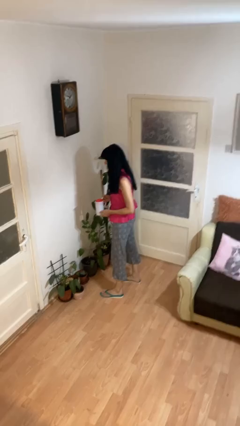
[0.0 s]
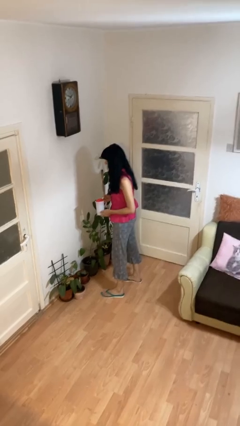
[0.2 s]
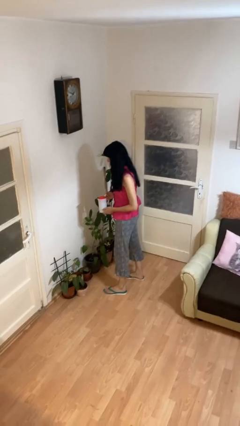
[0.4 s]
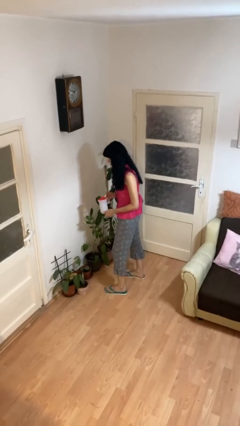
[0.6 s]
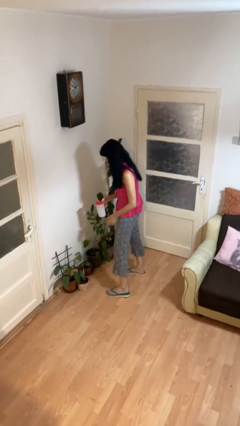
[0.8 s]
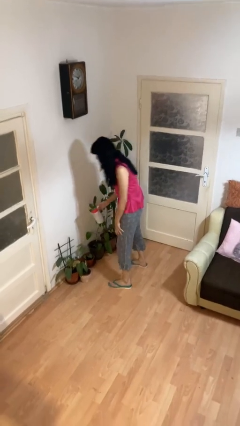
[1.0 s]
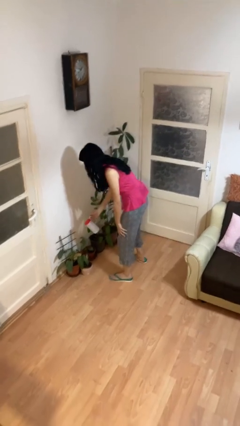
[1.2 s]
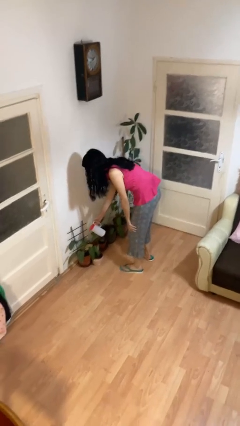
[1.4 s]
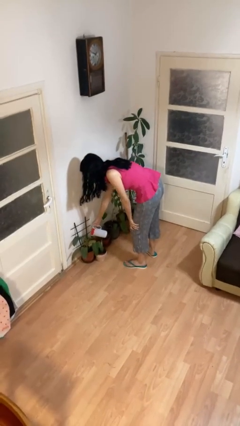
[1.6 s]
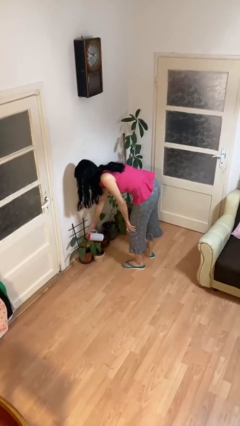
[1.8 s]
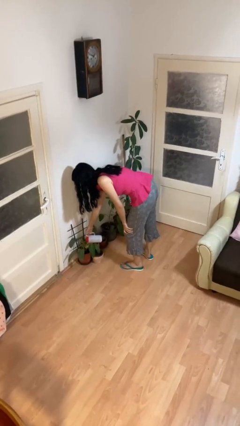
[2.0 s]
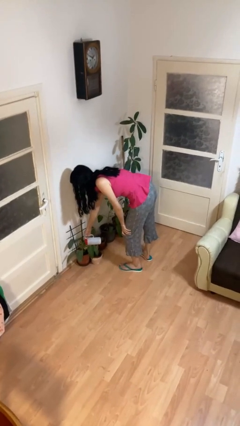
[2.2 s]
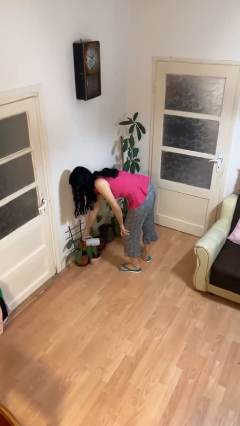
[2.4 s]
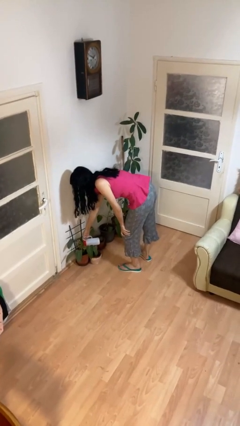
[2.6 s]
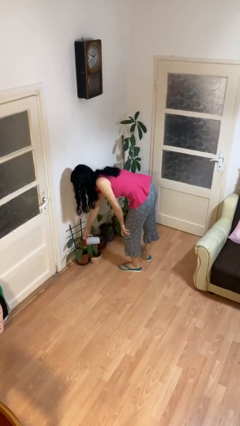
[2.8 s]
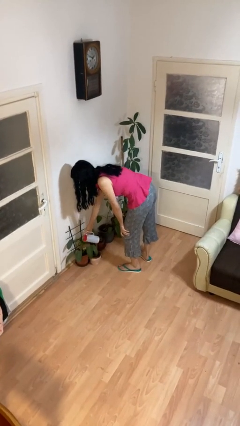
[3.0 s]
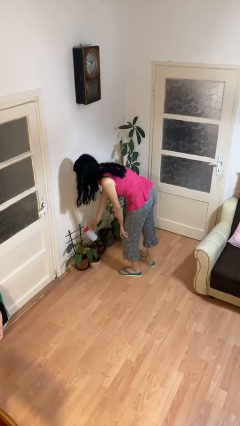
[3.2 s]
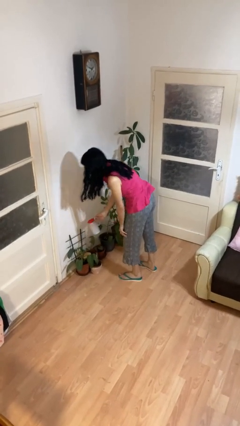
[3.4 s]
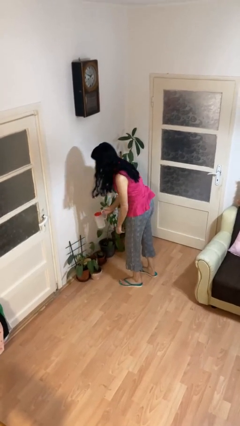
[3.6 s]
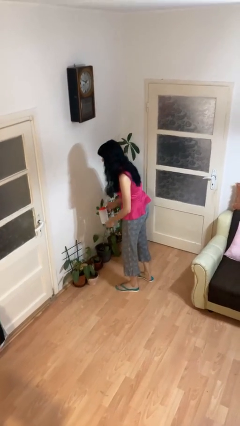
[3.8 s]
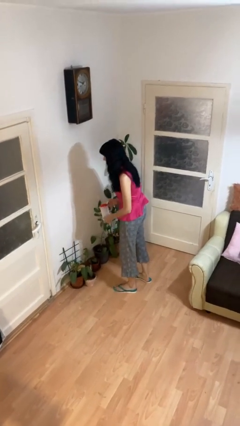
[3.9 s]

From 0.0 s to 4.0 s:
person waters houseplant

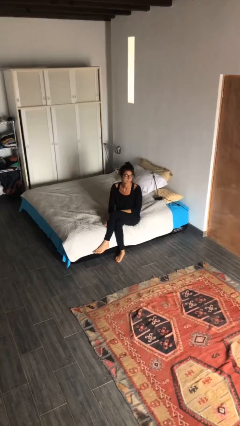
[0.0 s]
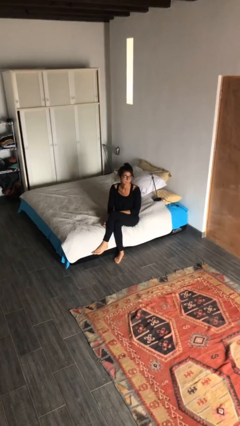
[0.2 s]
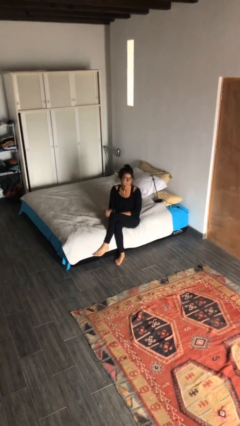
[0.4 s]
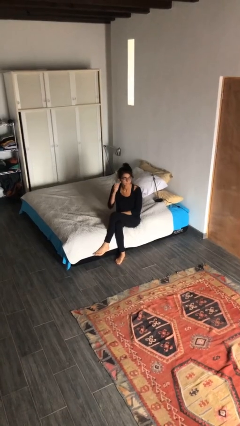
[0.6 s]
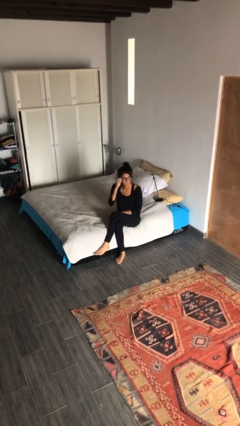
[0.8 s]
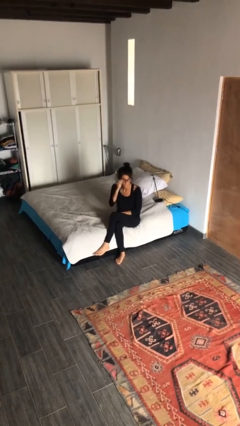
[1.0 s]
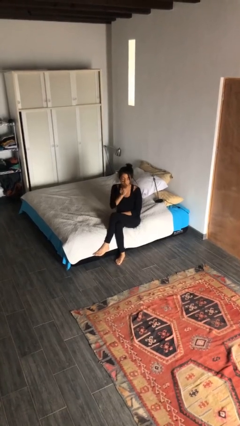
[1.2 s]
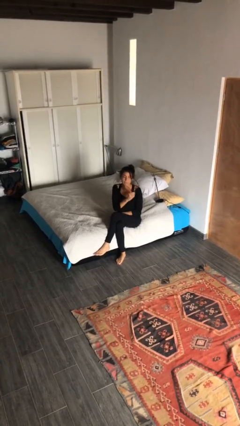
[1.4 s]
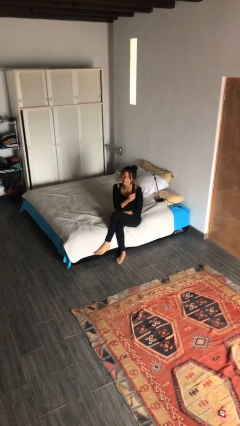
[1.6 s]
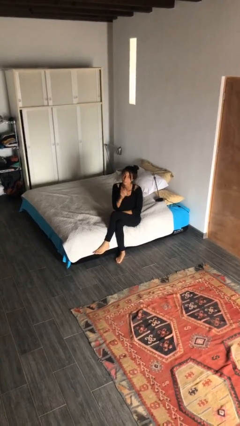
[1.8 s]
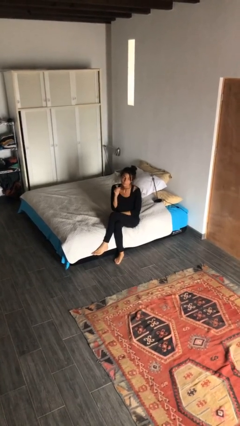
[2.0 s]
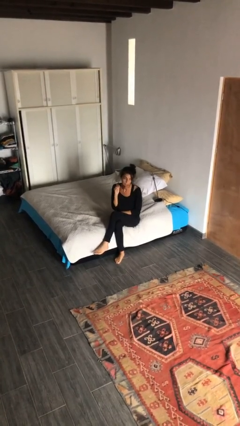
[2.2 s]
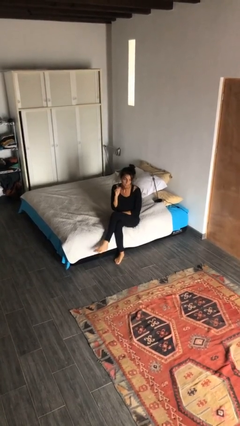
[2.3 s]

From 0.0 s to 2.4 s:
person takes off glasses

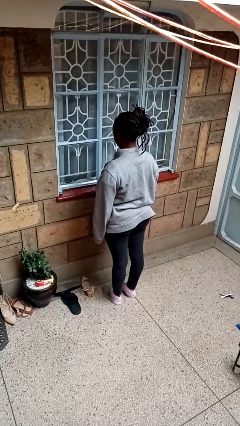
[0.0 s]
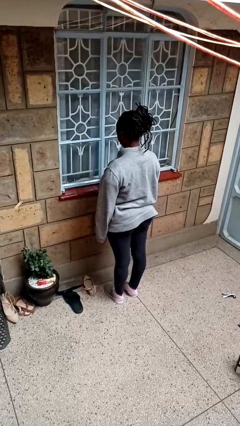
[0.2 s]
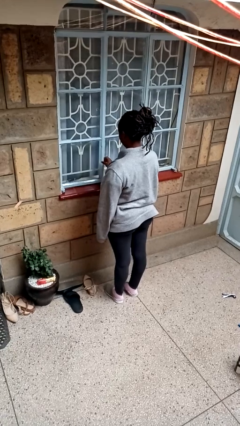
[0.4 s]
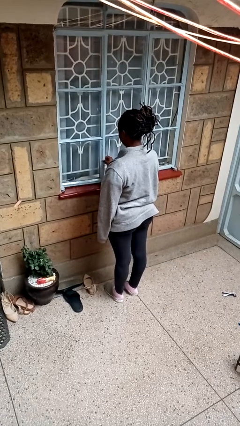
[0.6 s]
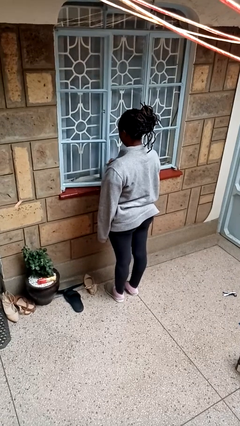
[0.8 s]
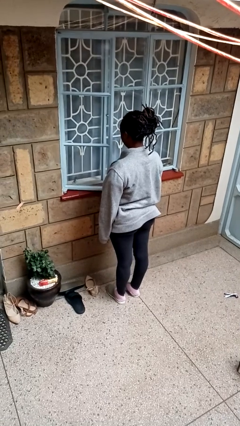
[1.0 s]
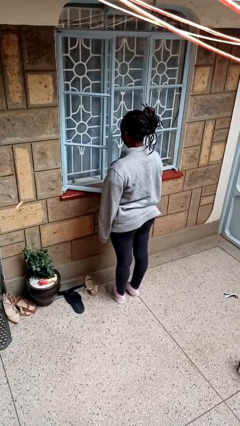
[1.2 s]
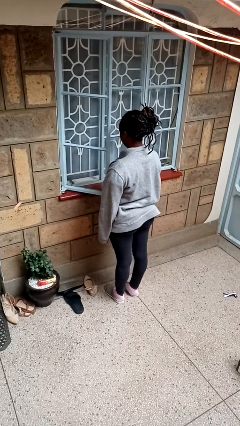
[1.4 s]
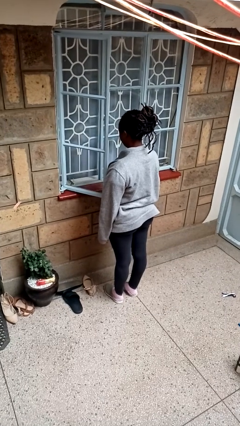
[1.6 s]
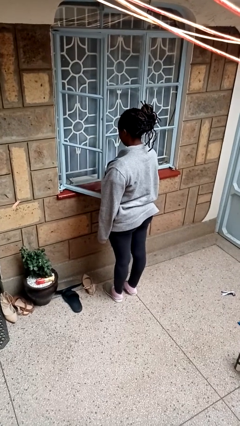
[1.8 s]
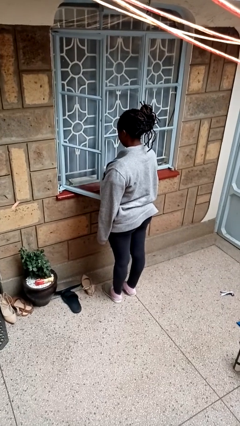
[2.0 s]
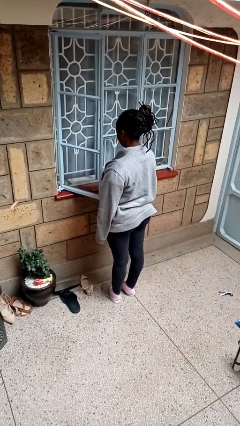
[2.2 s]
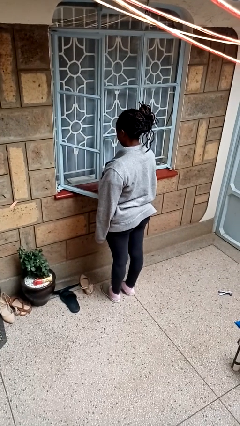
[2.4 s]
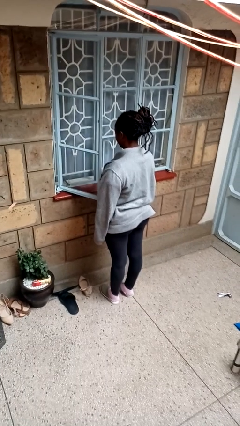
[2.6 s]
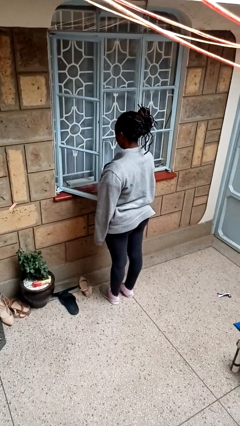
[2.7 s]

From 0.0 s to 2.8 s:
person opens home window

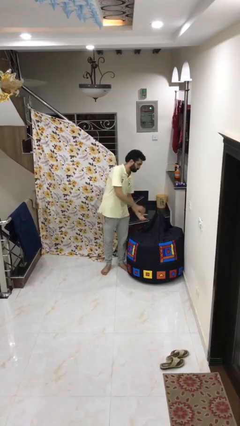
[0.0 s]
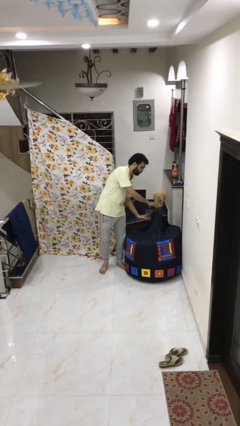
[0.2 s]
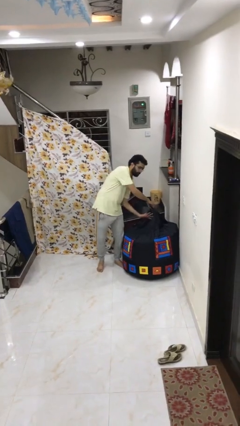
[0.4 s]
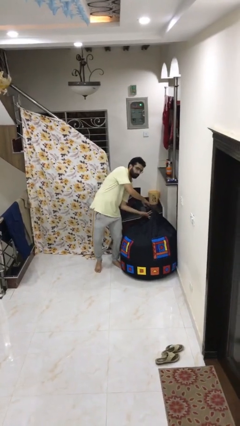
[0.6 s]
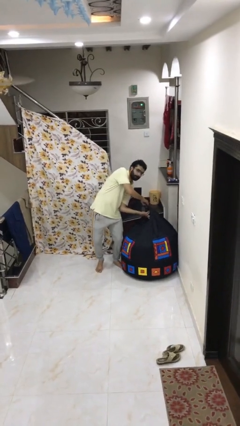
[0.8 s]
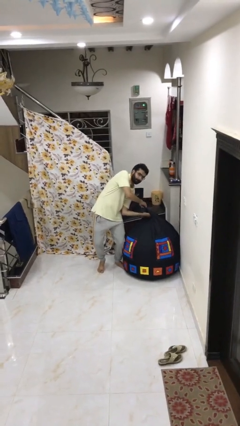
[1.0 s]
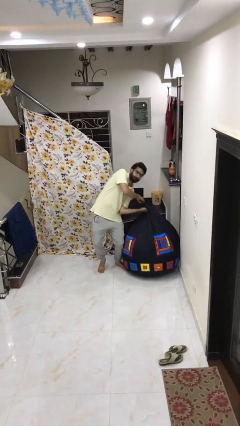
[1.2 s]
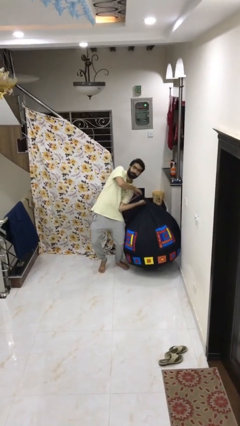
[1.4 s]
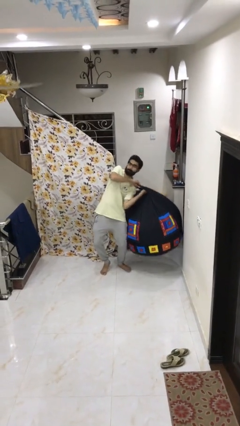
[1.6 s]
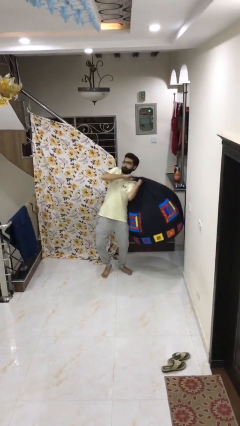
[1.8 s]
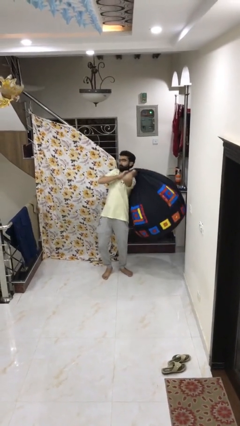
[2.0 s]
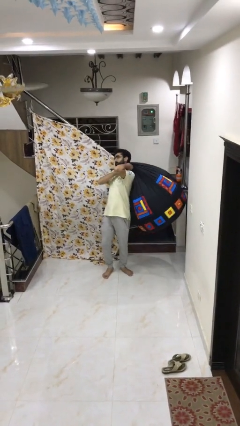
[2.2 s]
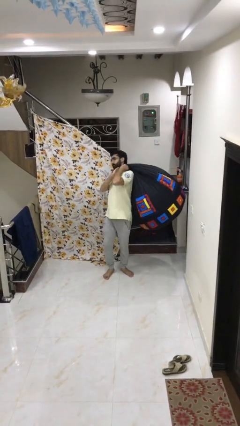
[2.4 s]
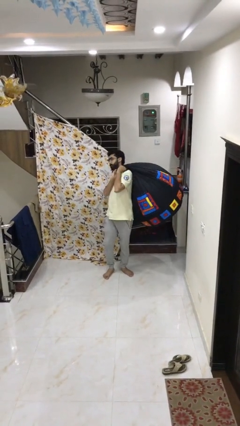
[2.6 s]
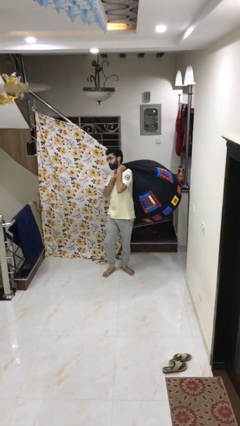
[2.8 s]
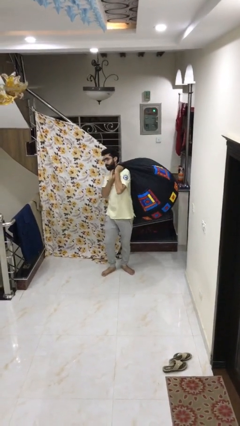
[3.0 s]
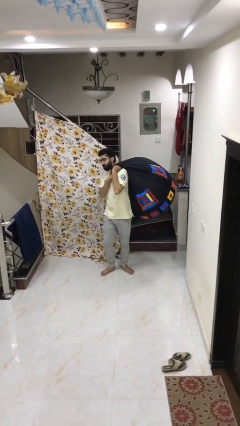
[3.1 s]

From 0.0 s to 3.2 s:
person picks up object from floor

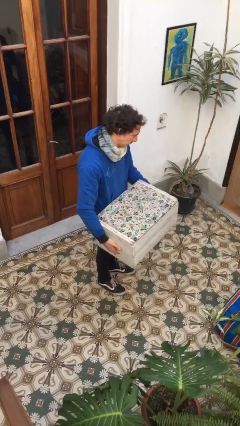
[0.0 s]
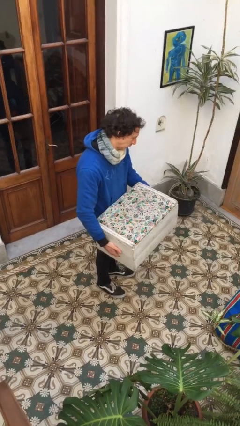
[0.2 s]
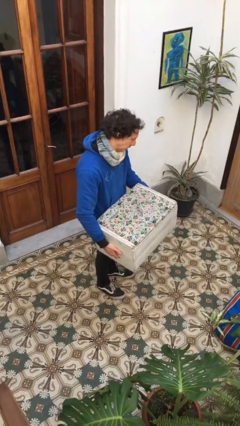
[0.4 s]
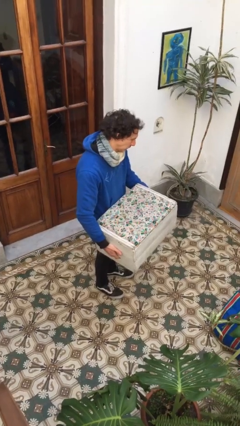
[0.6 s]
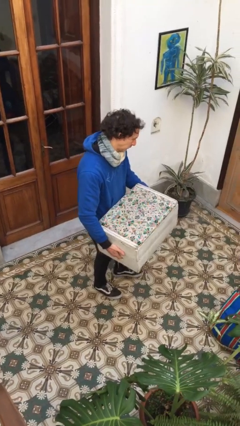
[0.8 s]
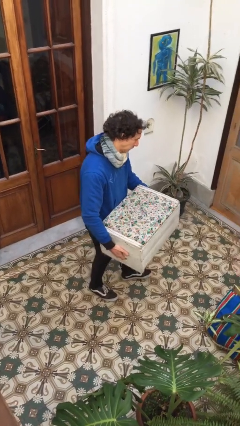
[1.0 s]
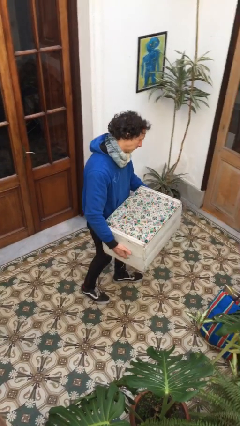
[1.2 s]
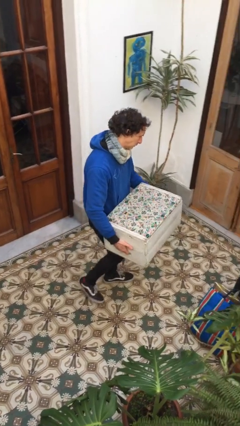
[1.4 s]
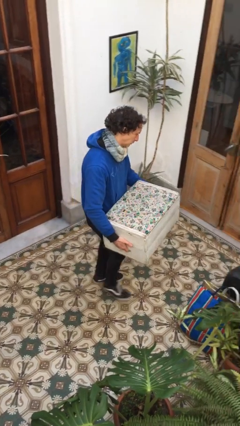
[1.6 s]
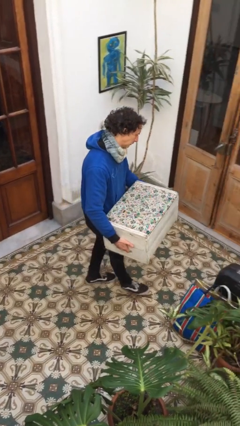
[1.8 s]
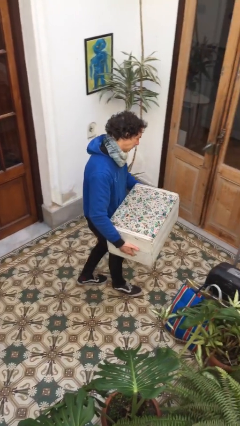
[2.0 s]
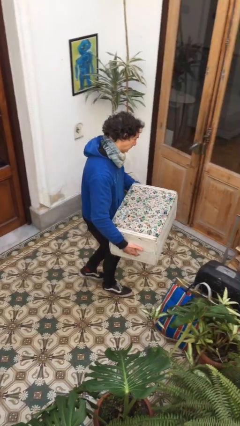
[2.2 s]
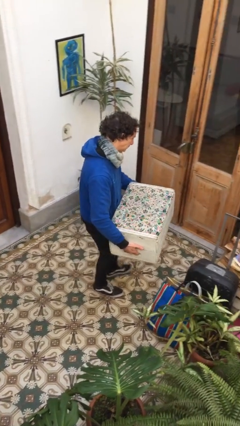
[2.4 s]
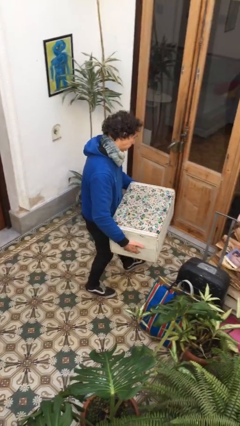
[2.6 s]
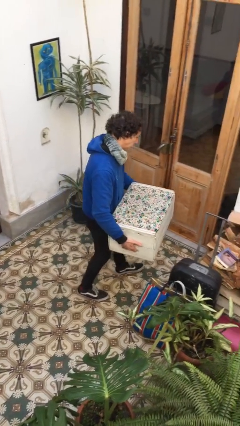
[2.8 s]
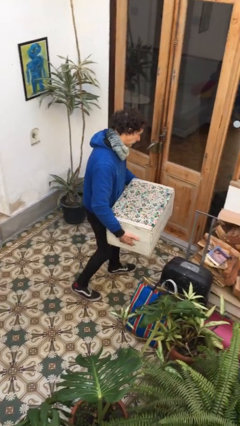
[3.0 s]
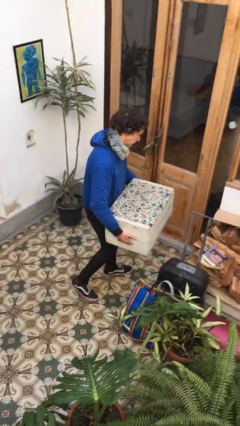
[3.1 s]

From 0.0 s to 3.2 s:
person carries furniture

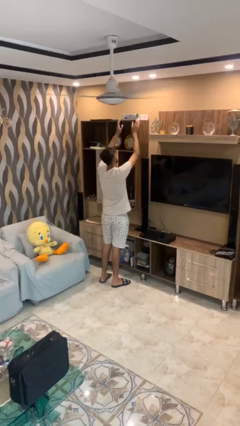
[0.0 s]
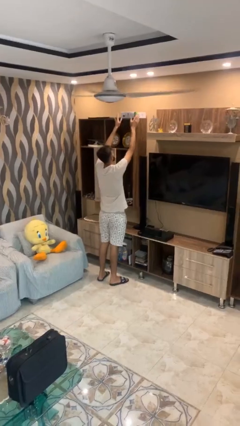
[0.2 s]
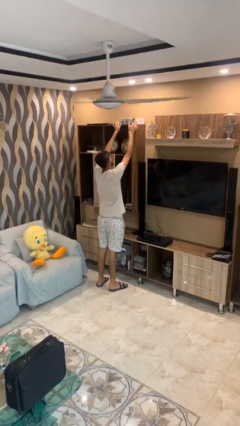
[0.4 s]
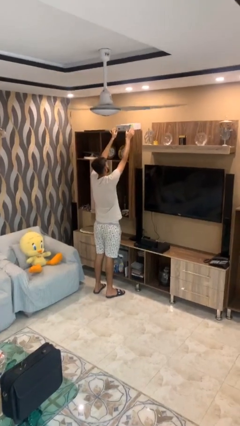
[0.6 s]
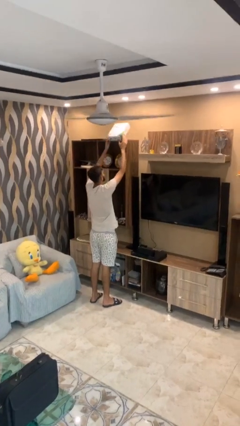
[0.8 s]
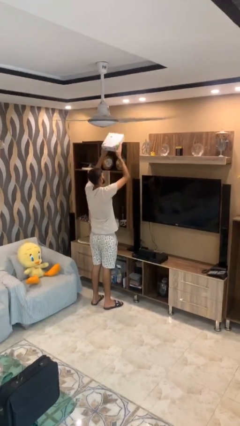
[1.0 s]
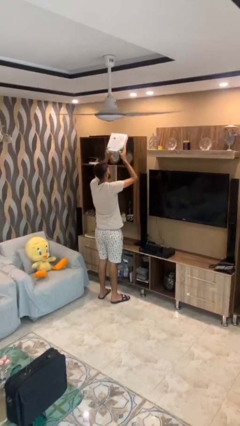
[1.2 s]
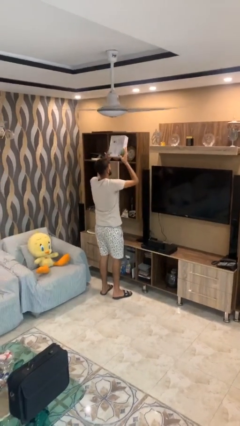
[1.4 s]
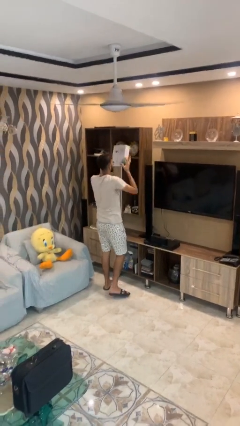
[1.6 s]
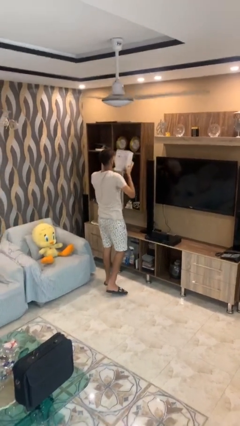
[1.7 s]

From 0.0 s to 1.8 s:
person picks up object from shelf
